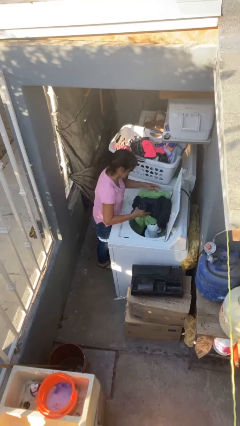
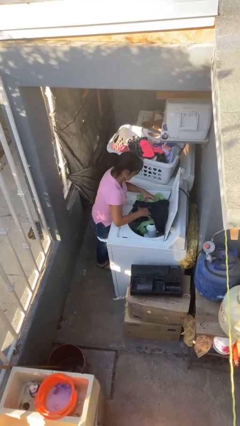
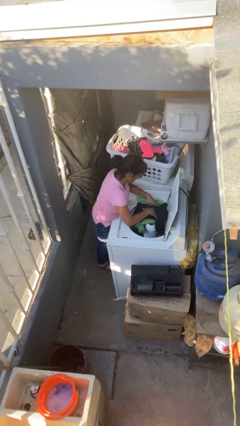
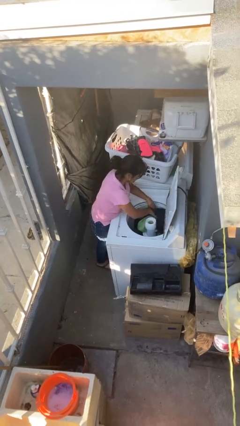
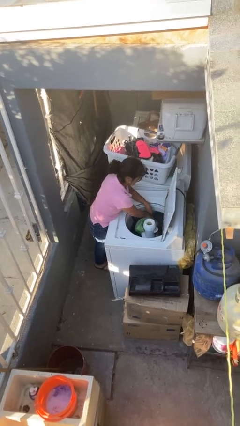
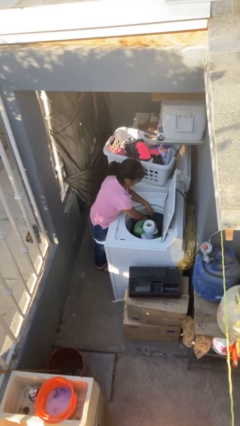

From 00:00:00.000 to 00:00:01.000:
person unloads clotheswasher

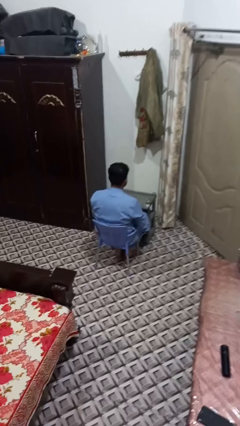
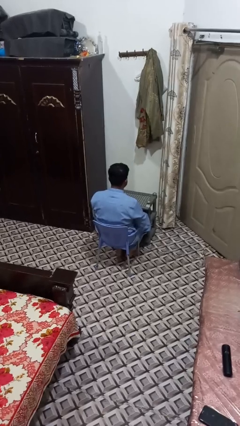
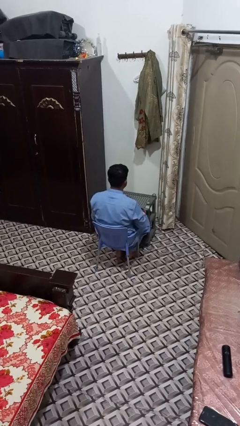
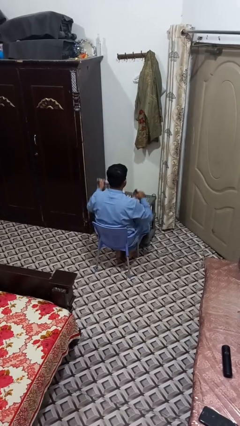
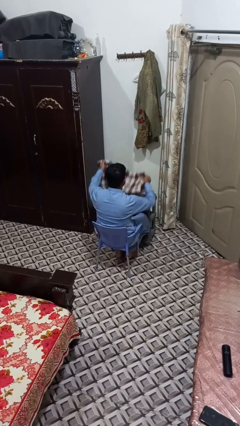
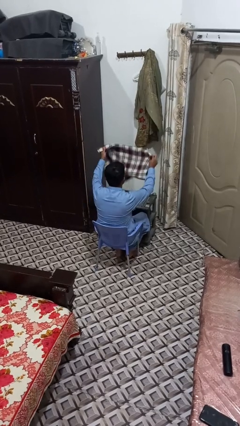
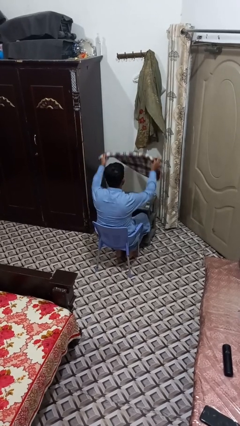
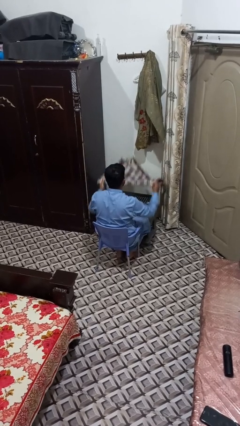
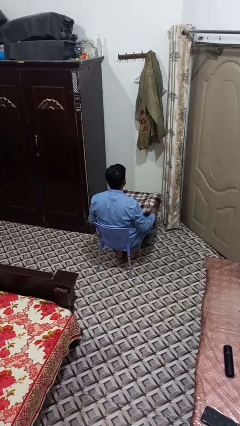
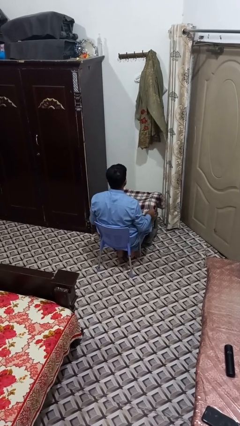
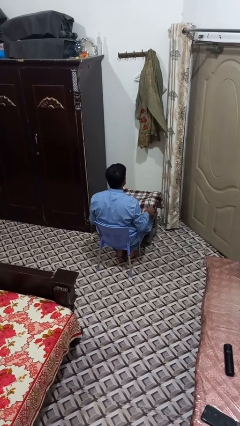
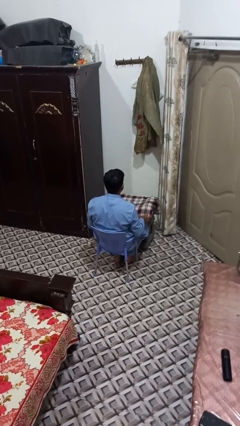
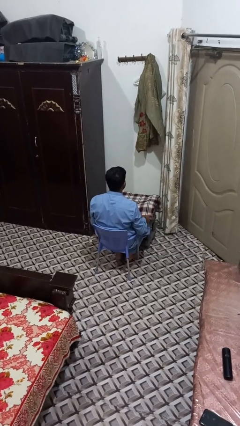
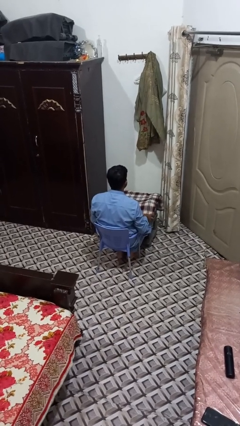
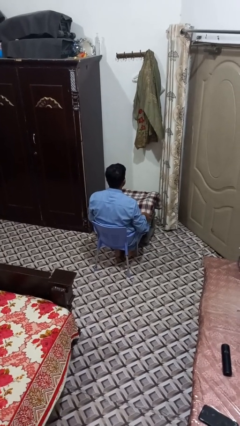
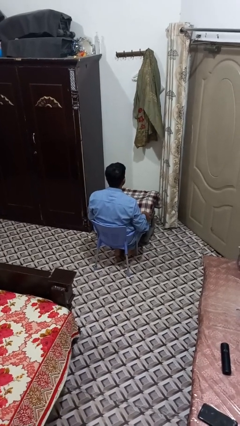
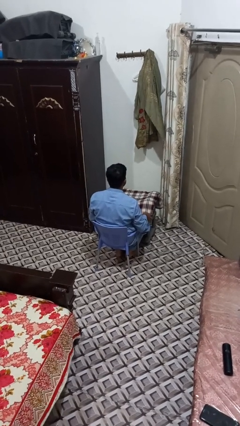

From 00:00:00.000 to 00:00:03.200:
person spreads tablecloth

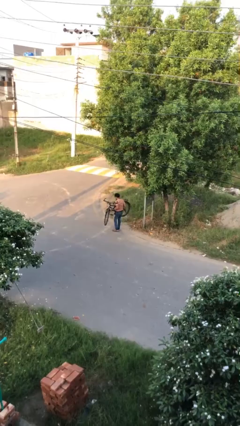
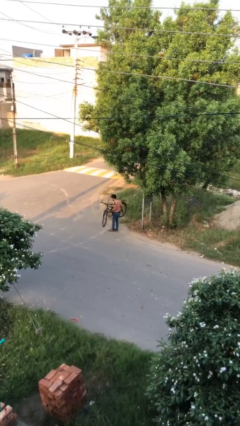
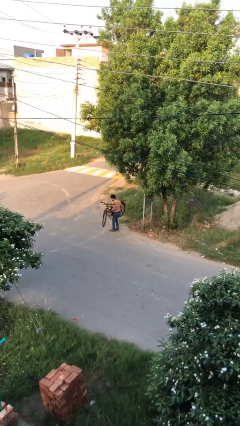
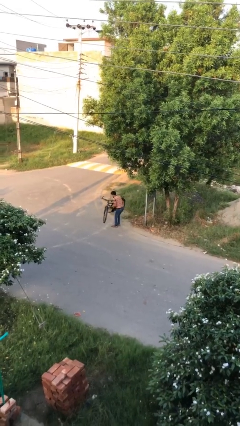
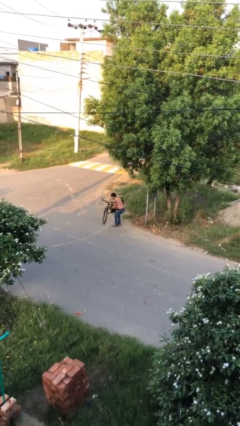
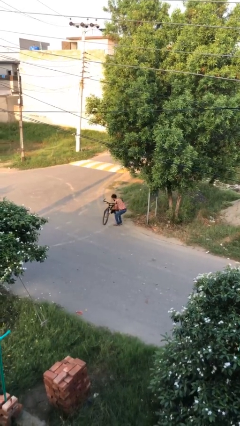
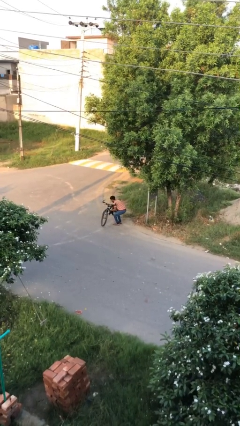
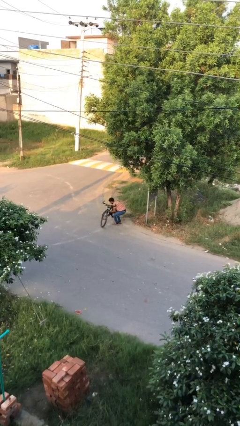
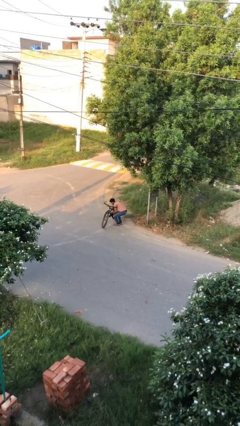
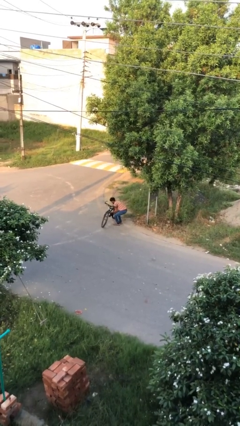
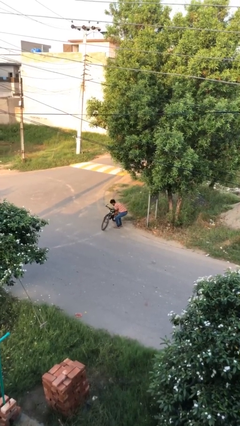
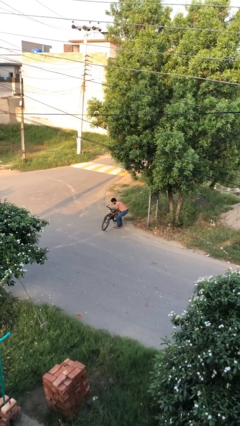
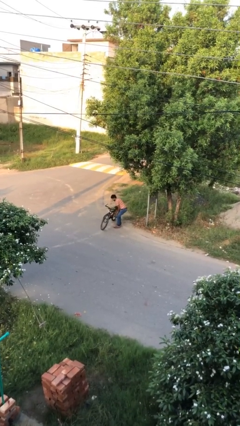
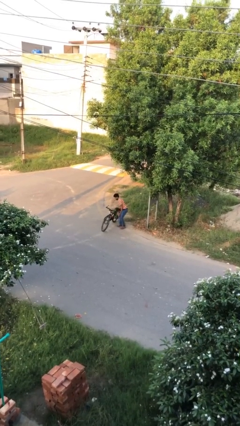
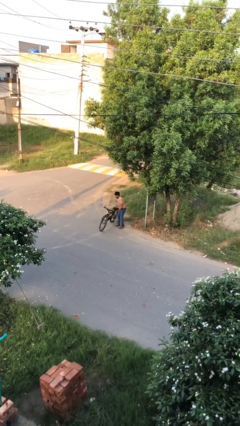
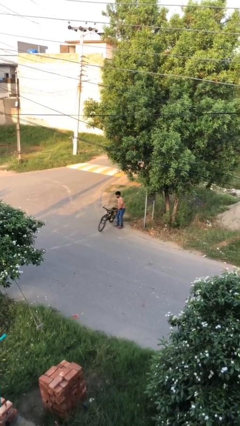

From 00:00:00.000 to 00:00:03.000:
person puts down object on floor

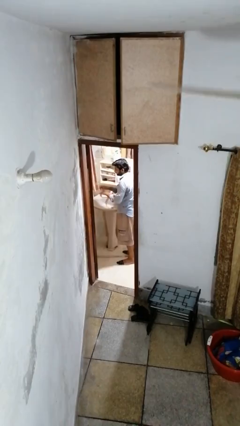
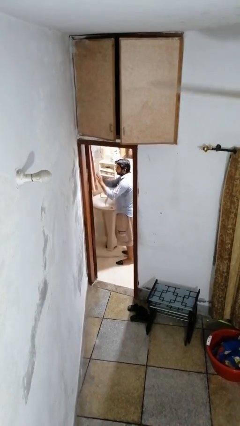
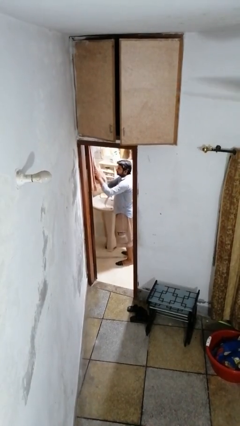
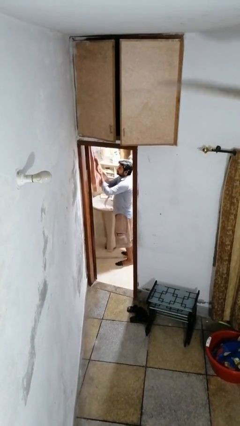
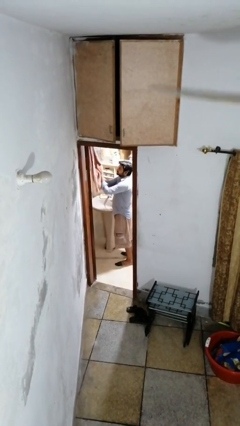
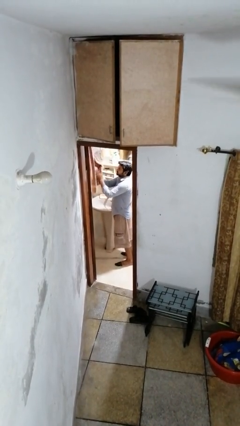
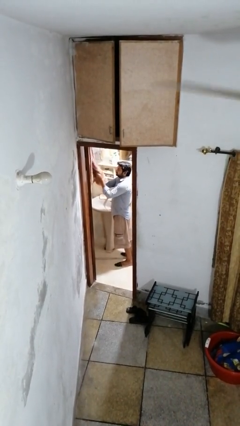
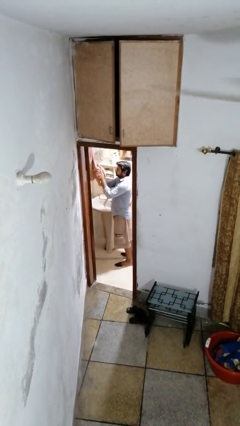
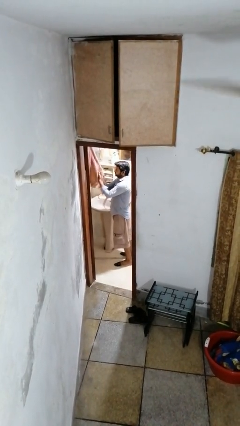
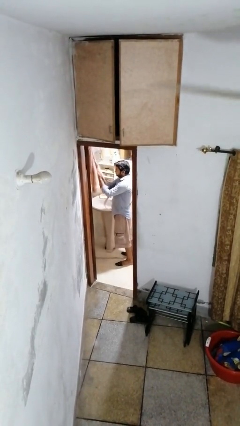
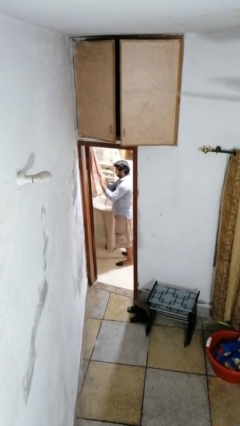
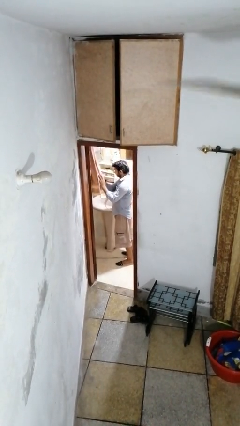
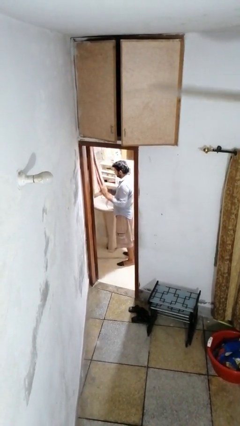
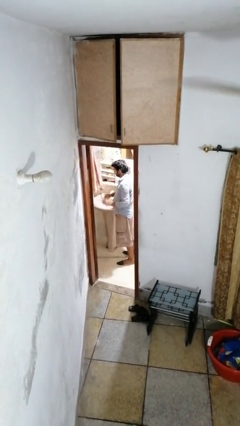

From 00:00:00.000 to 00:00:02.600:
person dries hands with towel

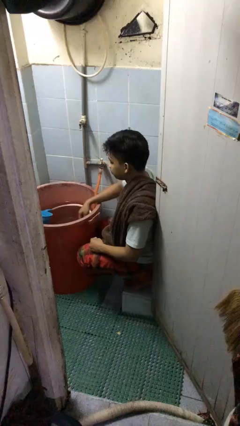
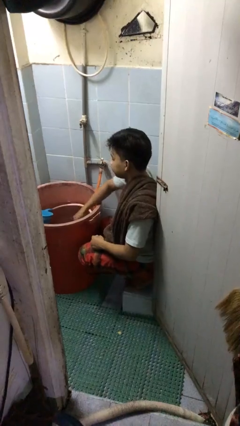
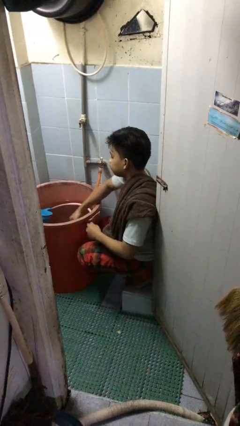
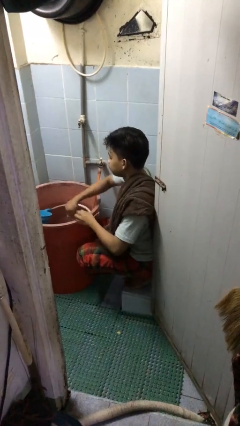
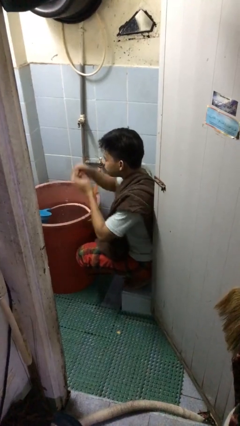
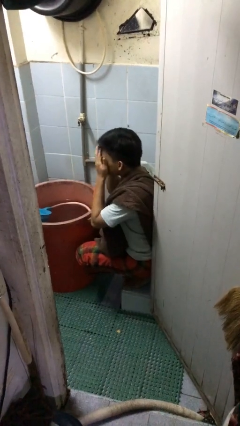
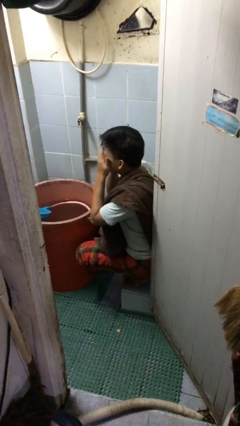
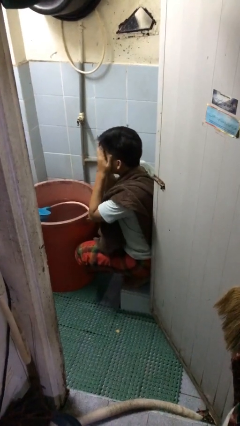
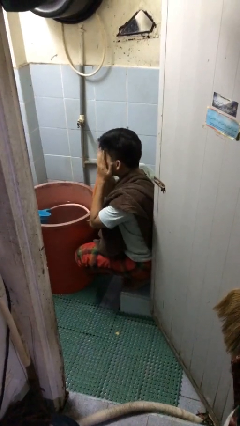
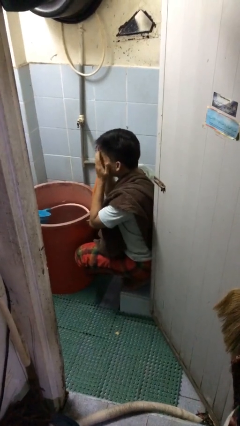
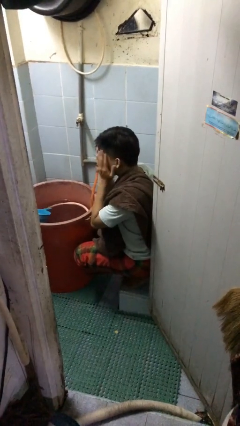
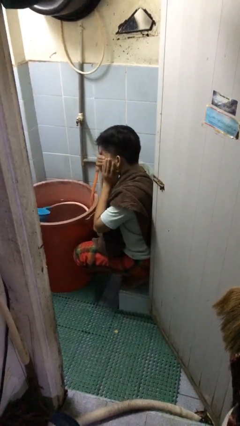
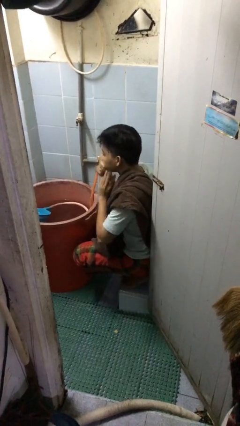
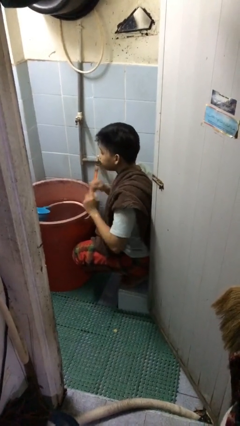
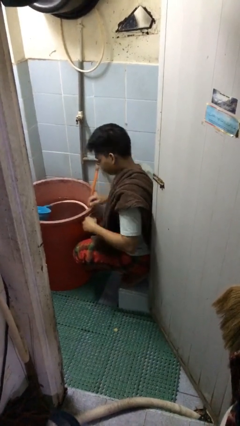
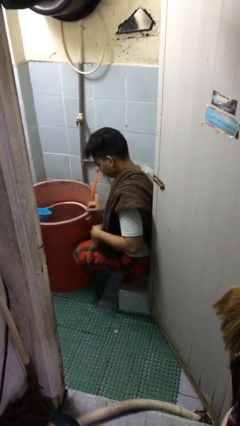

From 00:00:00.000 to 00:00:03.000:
person washes face

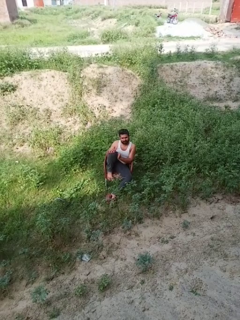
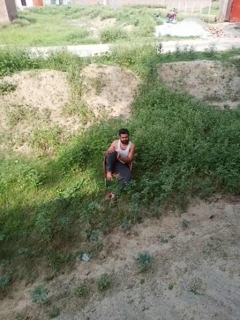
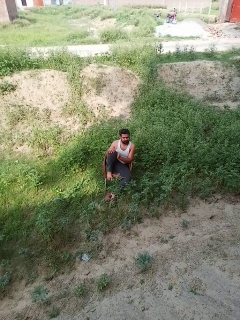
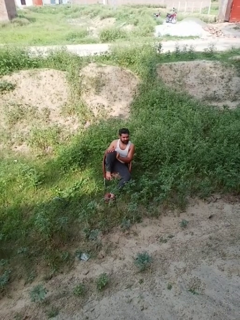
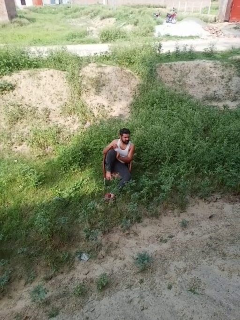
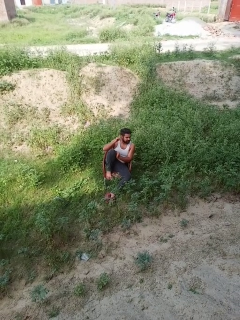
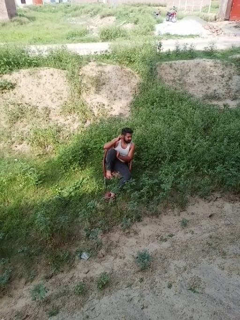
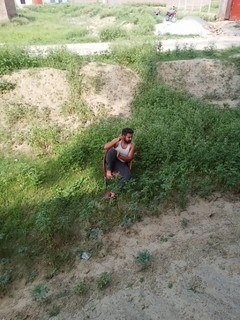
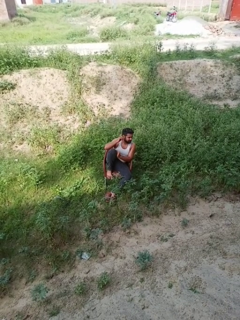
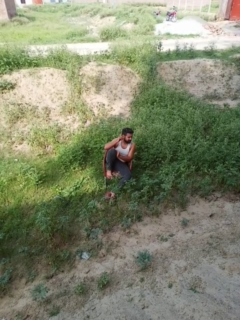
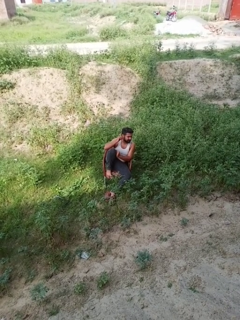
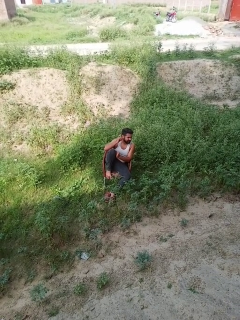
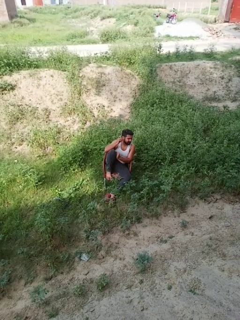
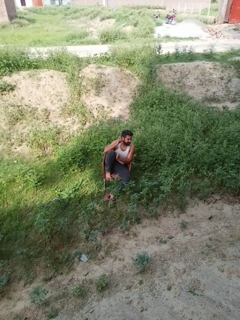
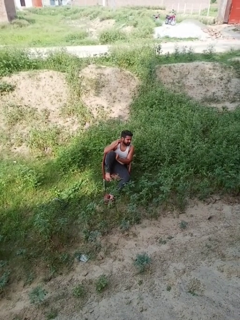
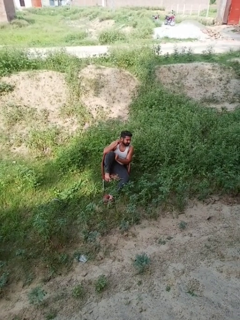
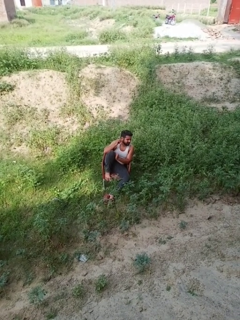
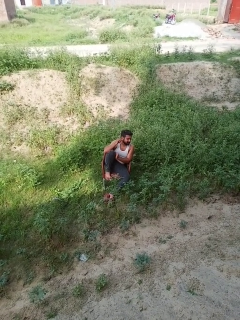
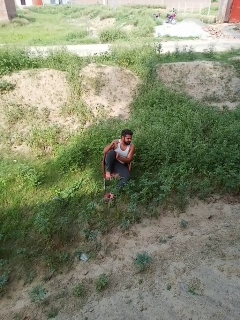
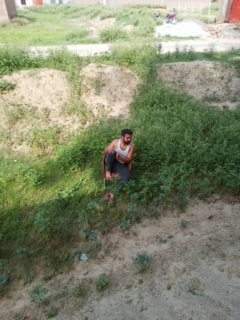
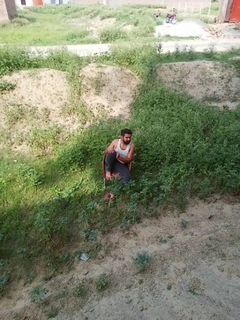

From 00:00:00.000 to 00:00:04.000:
person touches earlobe

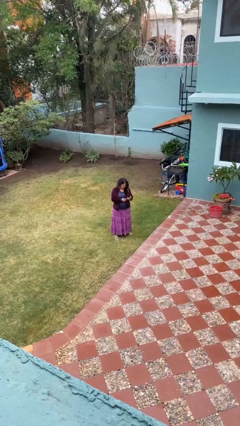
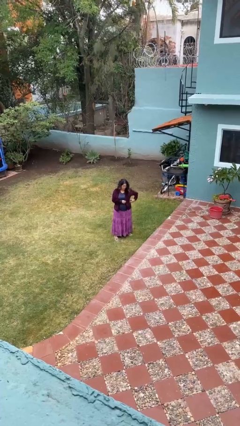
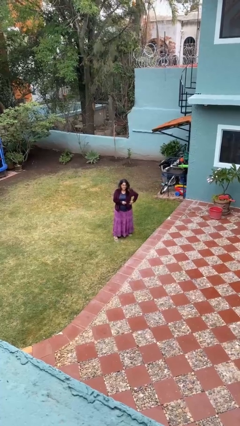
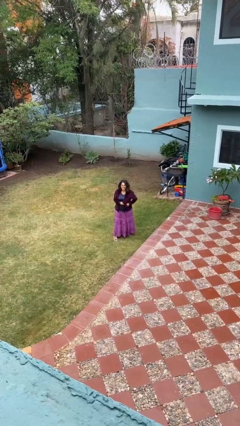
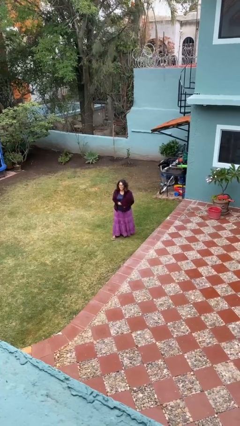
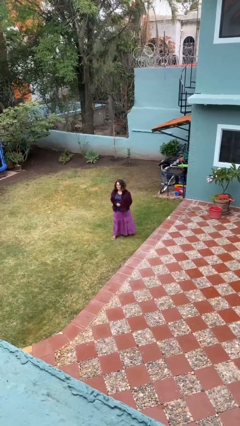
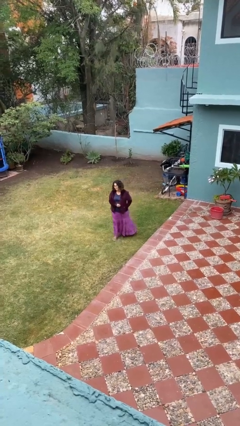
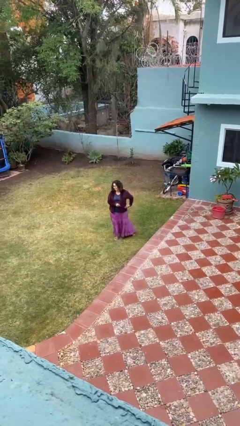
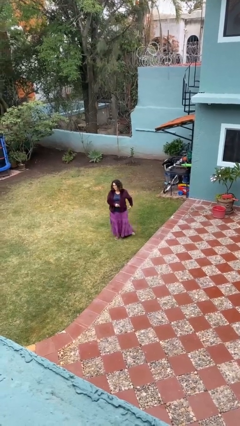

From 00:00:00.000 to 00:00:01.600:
person puts phone into pocket

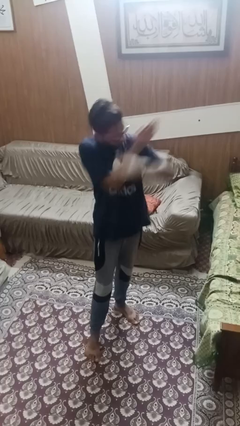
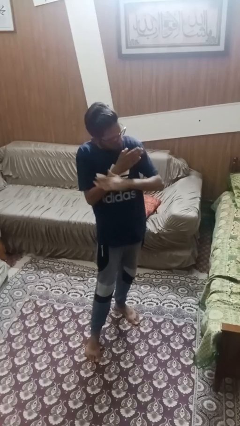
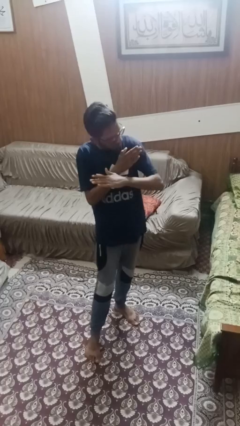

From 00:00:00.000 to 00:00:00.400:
person karate chop
